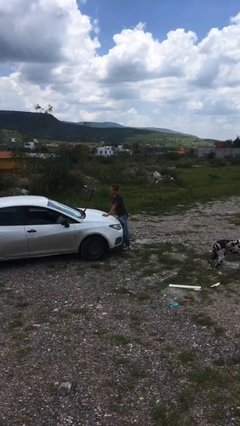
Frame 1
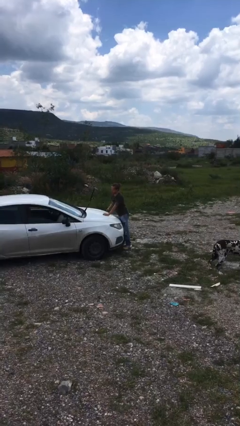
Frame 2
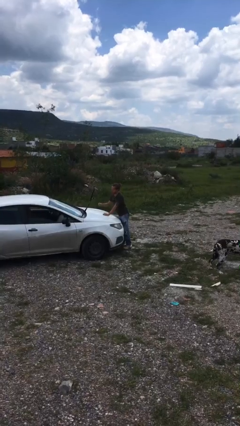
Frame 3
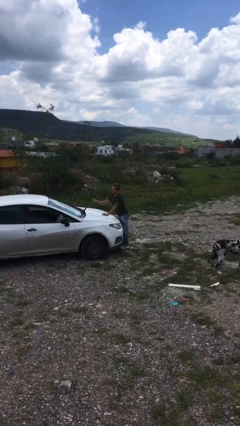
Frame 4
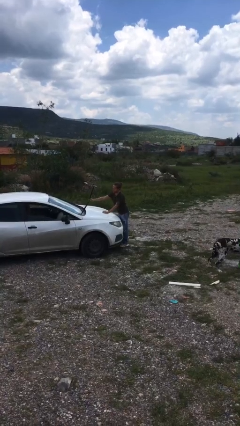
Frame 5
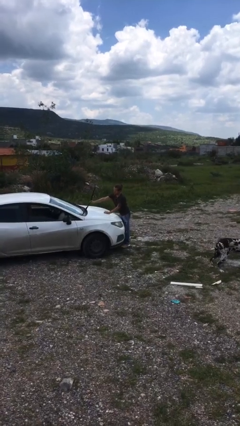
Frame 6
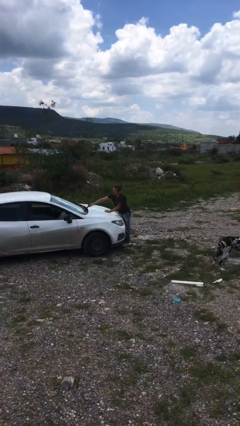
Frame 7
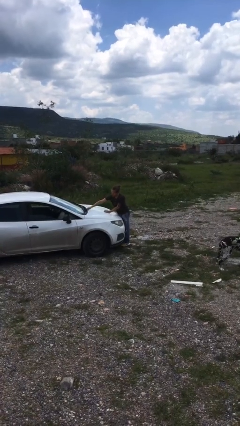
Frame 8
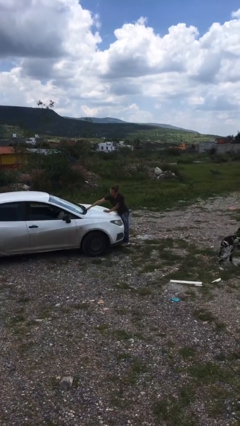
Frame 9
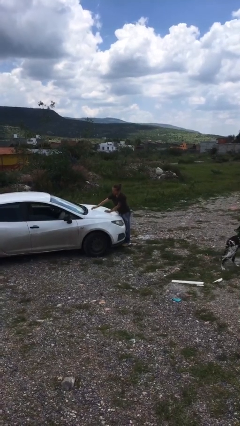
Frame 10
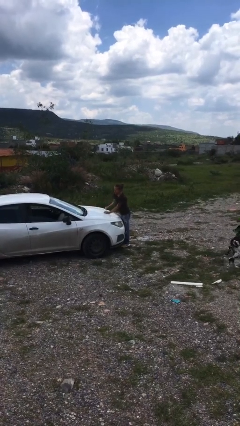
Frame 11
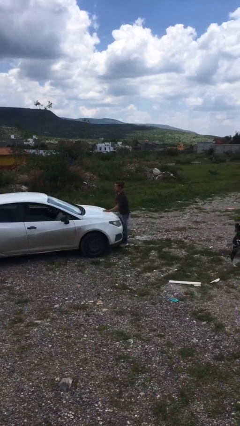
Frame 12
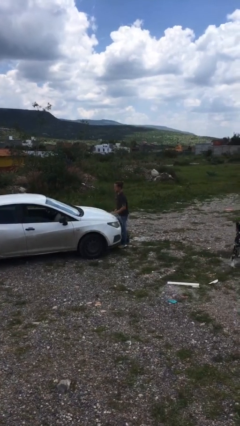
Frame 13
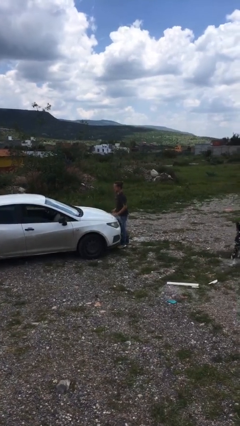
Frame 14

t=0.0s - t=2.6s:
person flips down car wipers

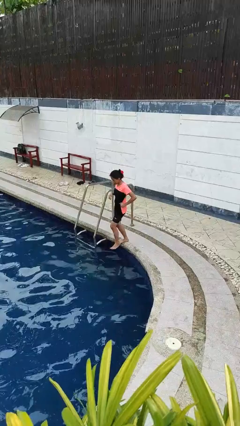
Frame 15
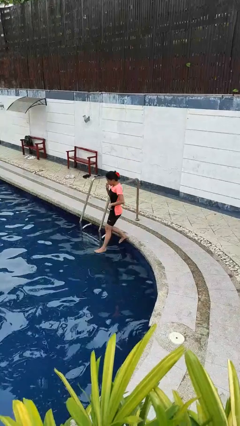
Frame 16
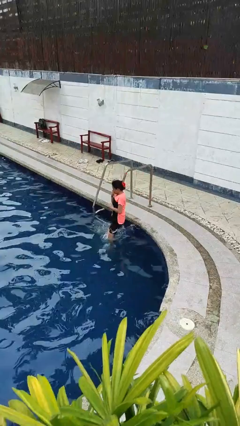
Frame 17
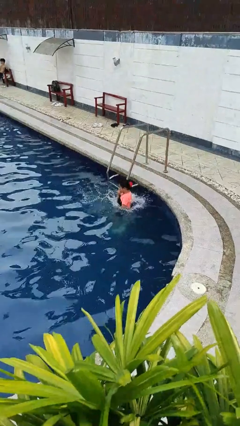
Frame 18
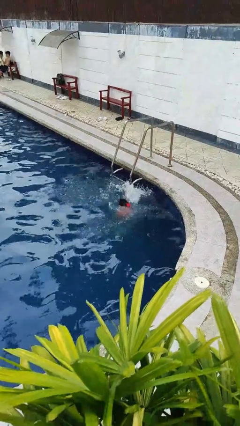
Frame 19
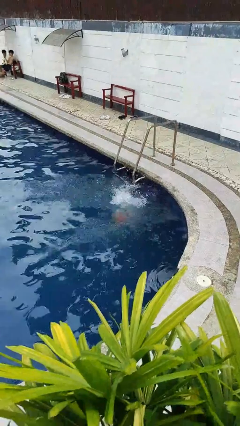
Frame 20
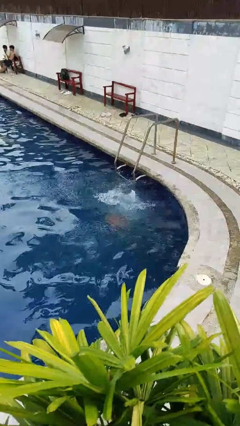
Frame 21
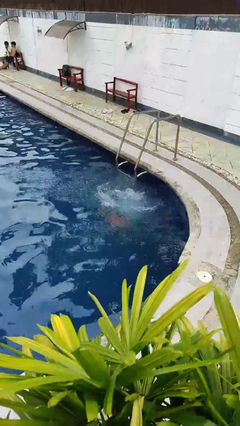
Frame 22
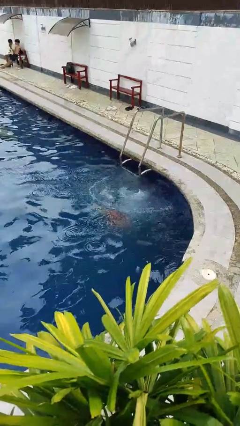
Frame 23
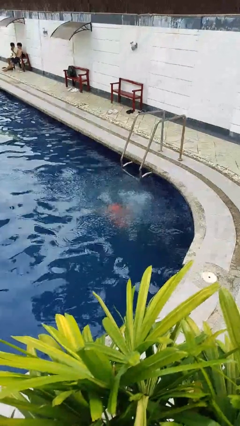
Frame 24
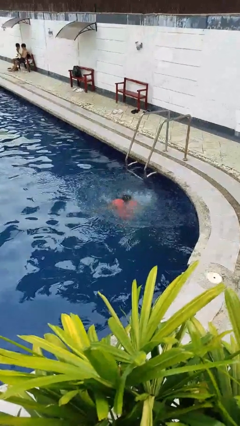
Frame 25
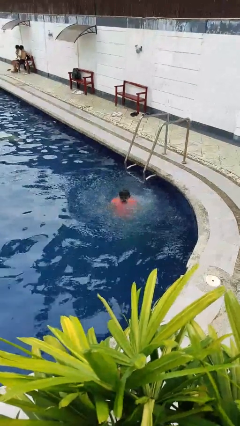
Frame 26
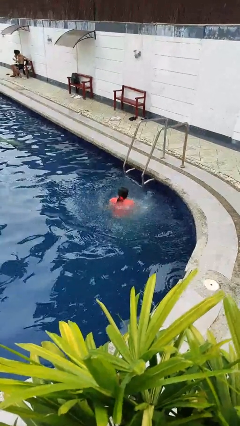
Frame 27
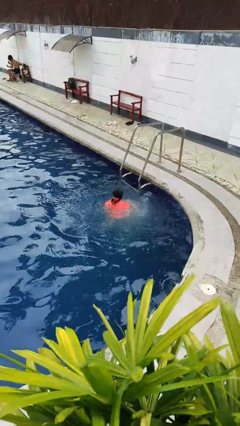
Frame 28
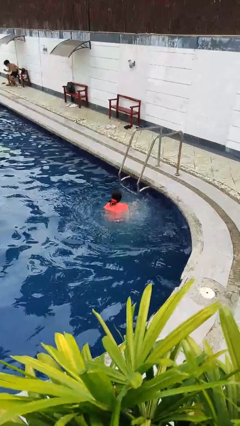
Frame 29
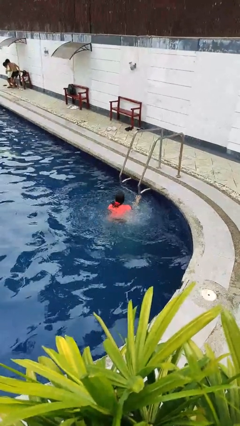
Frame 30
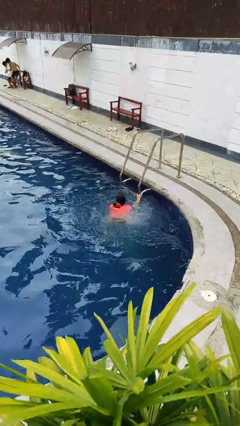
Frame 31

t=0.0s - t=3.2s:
person jumps into pool

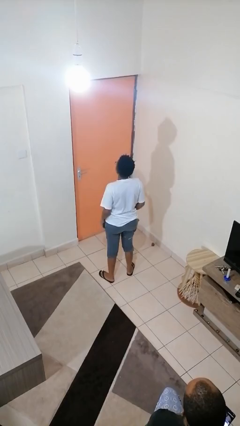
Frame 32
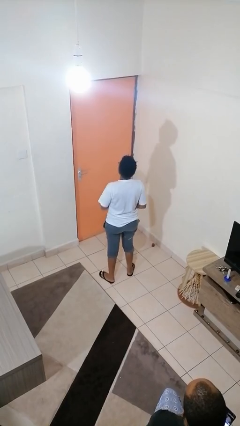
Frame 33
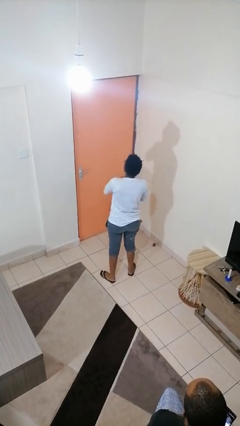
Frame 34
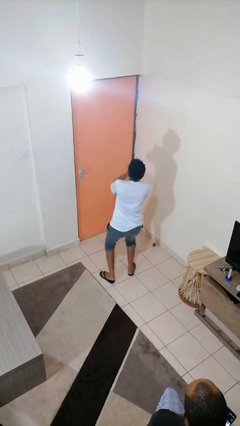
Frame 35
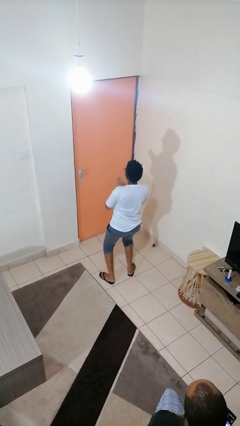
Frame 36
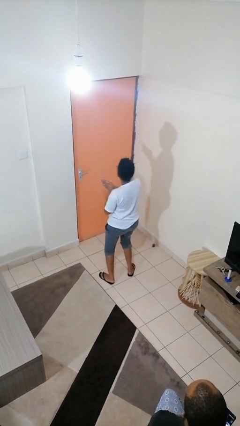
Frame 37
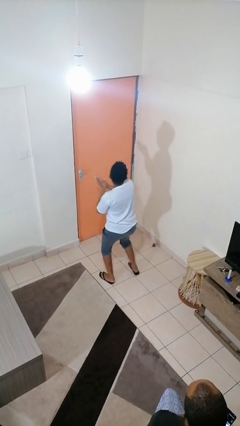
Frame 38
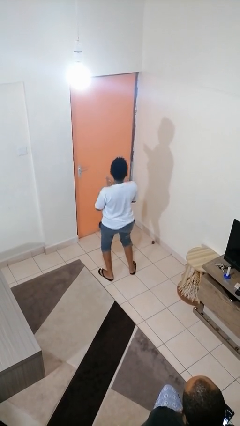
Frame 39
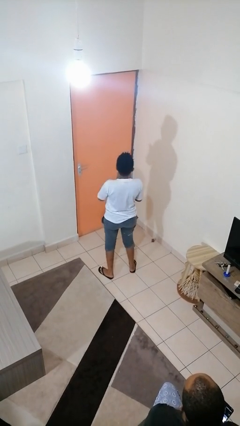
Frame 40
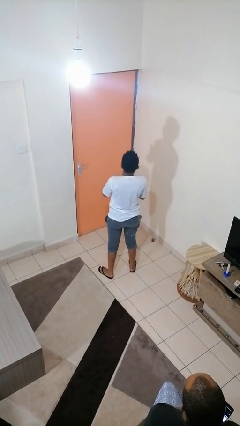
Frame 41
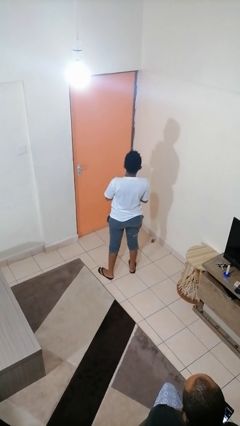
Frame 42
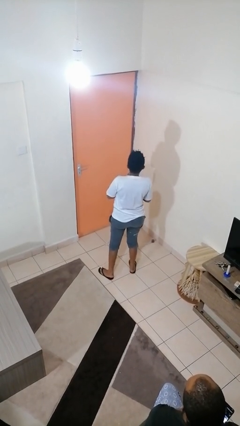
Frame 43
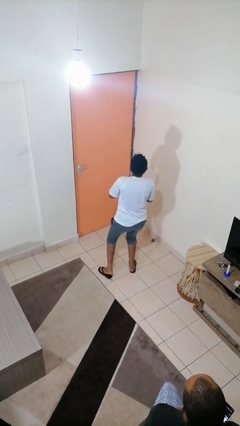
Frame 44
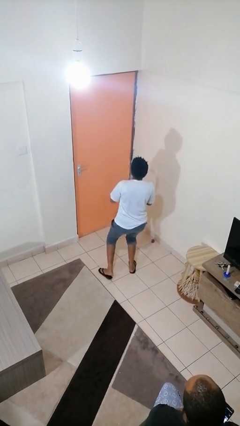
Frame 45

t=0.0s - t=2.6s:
person dances in place

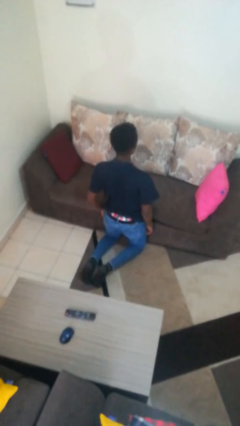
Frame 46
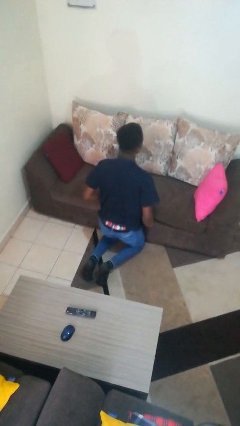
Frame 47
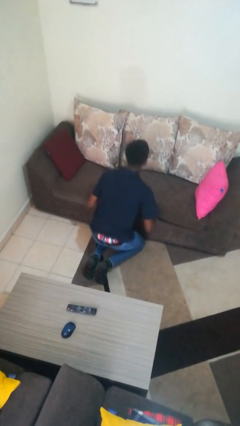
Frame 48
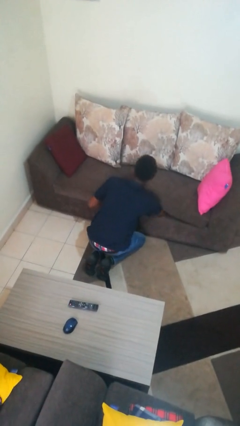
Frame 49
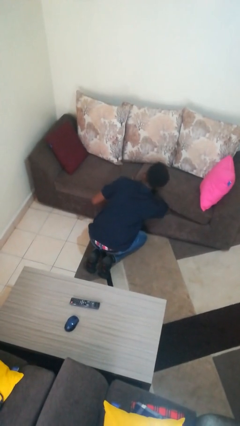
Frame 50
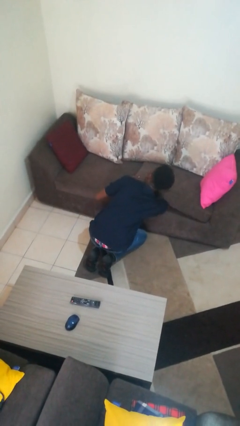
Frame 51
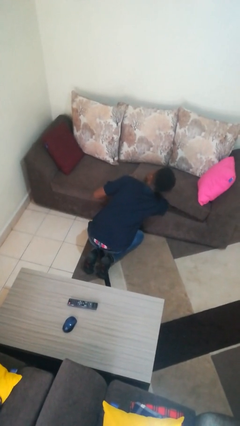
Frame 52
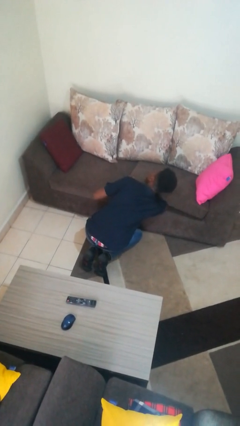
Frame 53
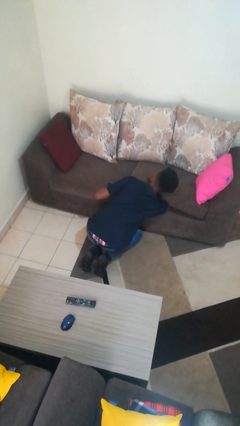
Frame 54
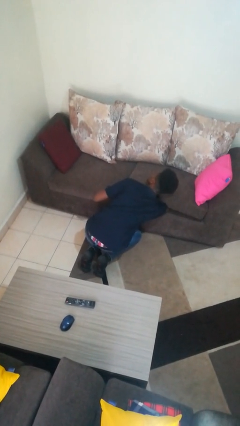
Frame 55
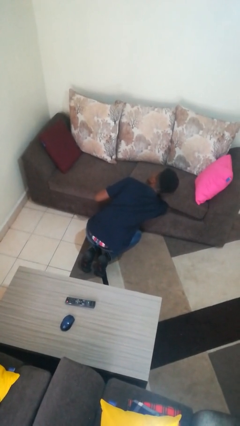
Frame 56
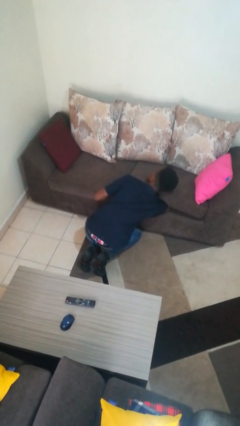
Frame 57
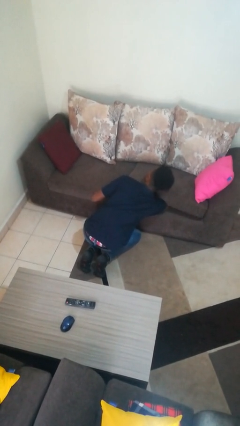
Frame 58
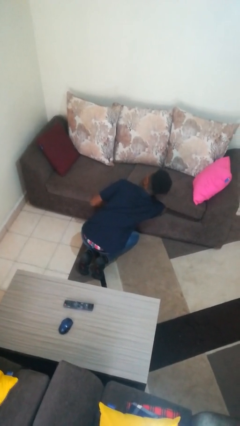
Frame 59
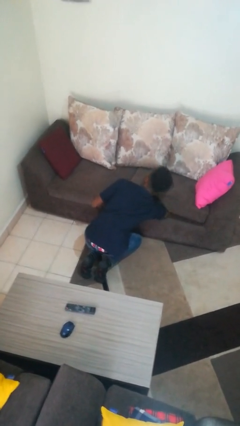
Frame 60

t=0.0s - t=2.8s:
person searches under couch

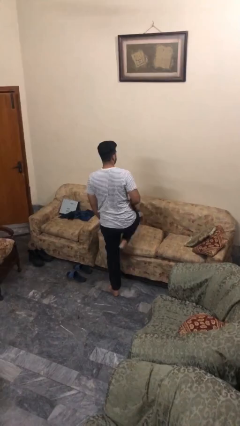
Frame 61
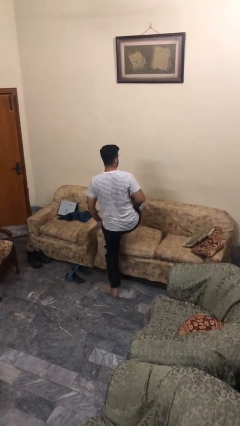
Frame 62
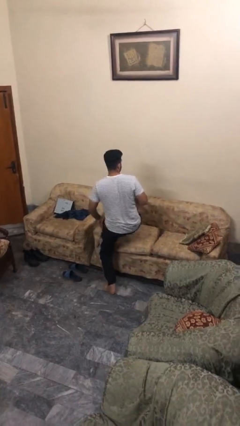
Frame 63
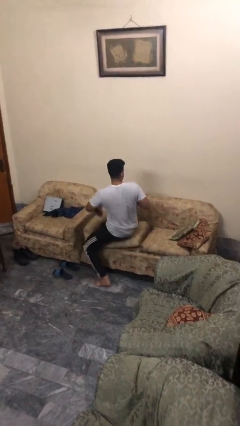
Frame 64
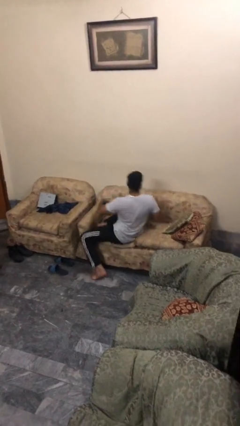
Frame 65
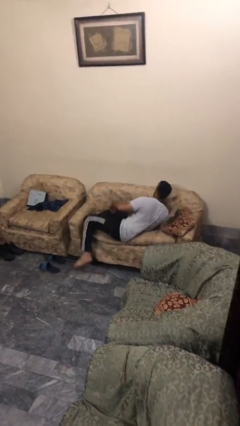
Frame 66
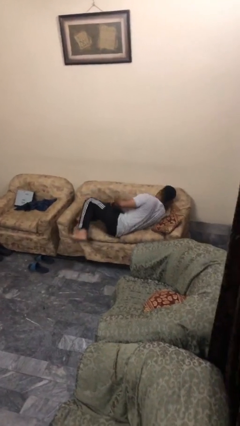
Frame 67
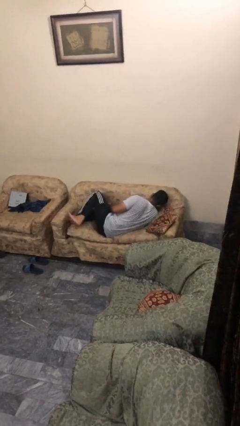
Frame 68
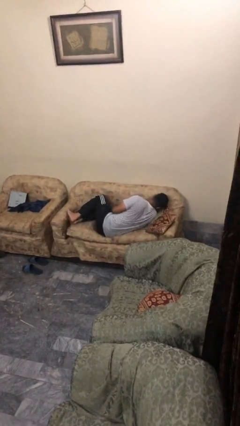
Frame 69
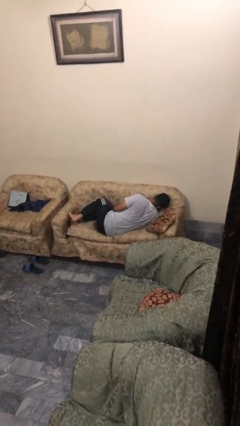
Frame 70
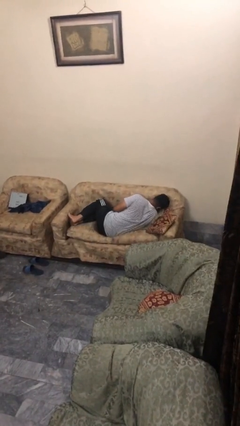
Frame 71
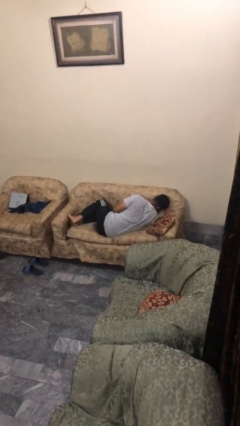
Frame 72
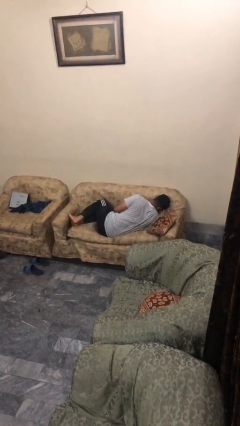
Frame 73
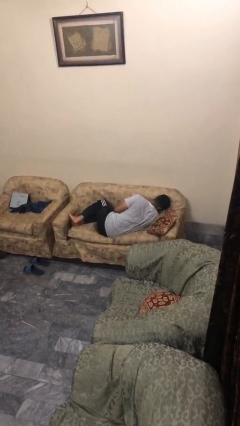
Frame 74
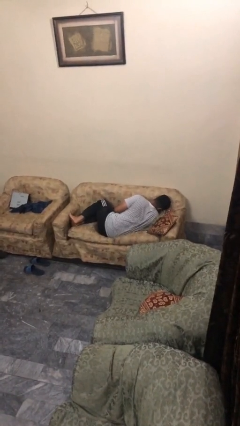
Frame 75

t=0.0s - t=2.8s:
person lies down on couch

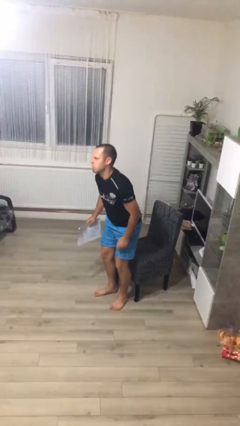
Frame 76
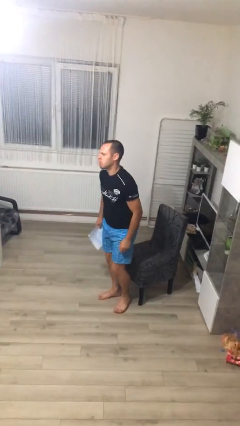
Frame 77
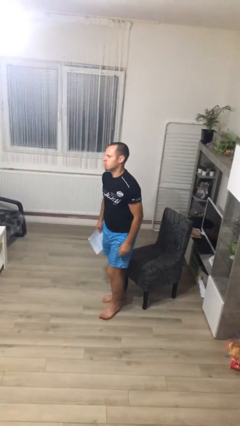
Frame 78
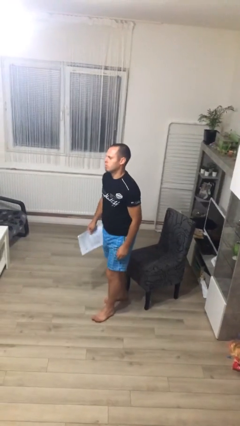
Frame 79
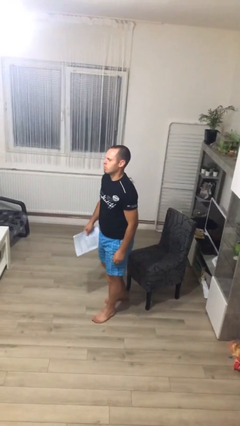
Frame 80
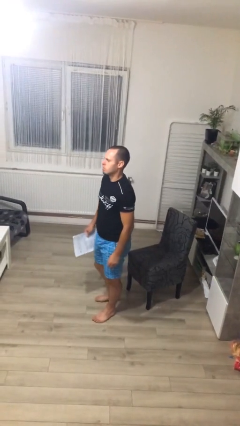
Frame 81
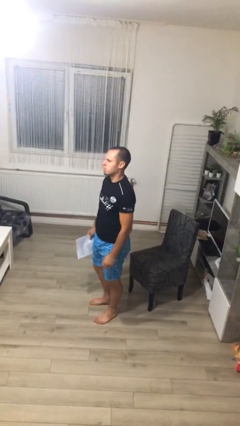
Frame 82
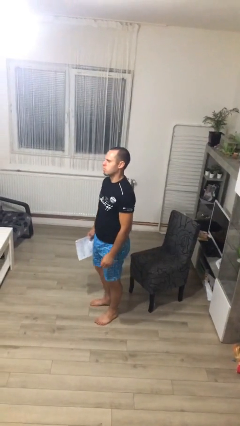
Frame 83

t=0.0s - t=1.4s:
person stands up

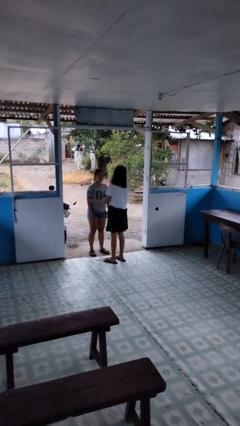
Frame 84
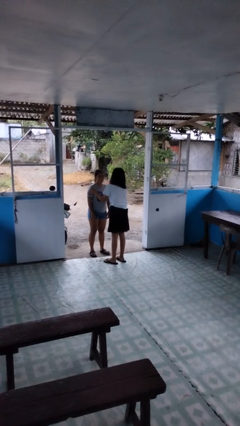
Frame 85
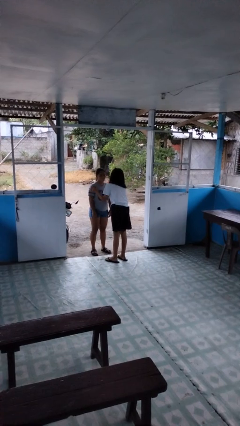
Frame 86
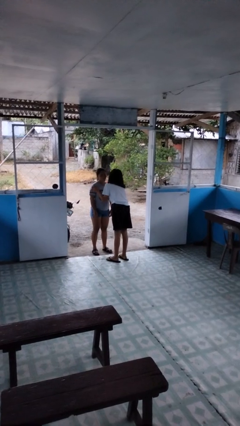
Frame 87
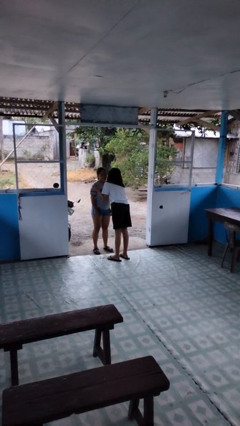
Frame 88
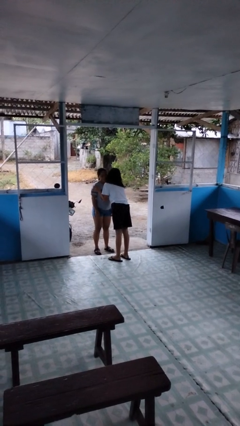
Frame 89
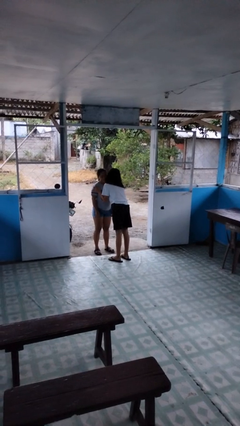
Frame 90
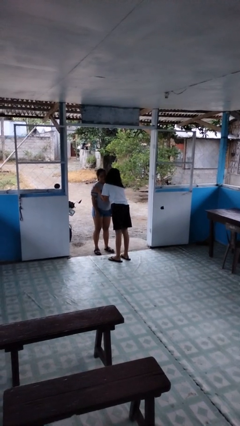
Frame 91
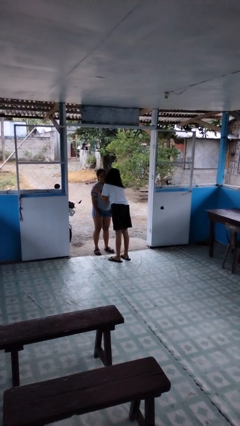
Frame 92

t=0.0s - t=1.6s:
person kisses cheek of person

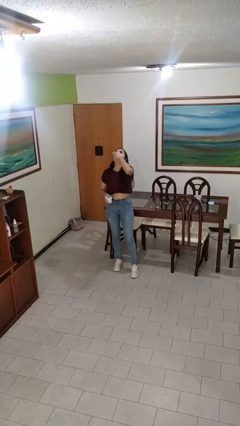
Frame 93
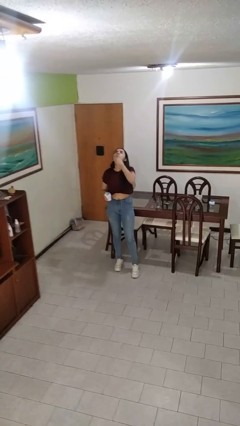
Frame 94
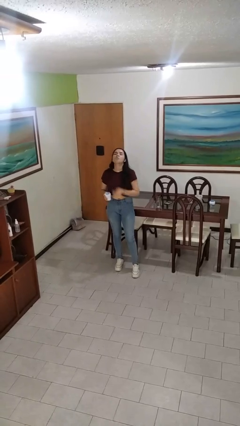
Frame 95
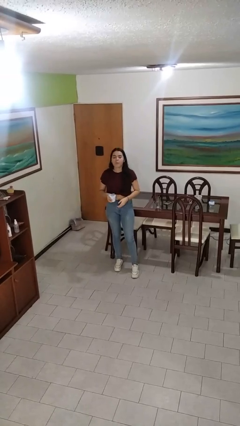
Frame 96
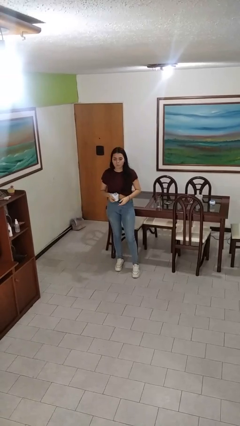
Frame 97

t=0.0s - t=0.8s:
person takes medicine pills
